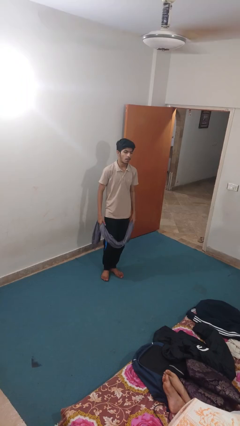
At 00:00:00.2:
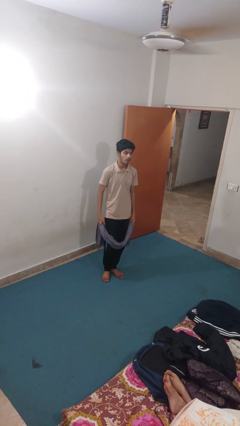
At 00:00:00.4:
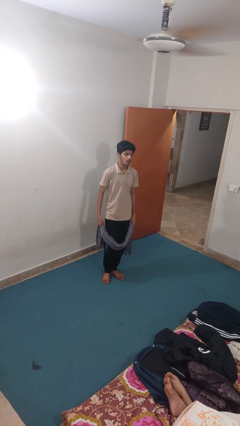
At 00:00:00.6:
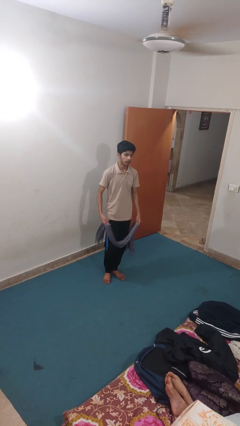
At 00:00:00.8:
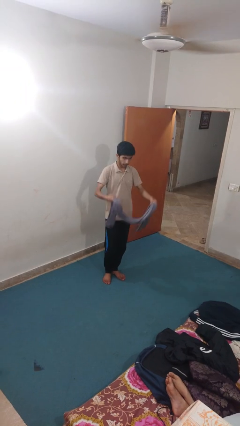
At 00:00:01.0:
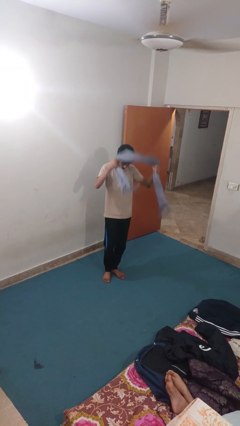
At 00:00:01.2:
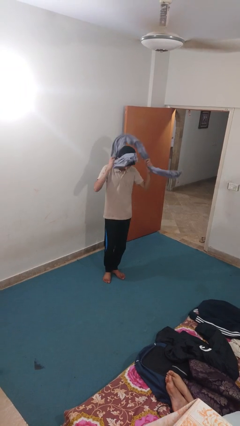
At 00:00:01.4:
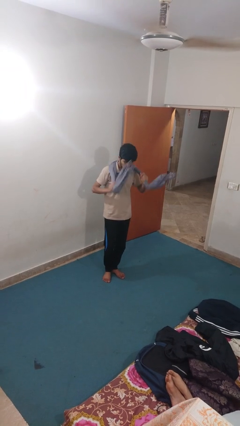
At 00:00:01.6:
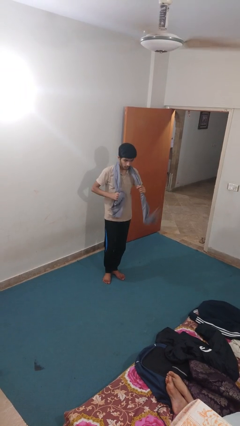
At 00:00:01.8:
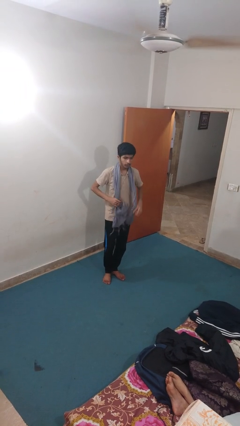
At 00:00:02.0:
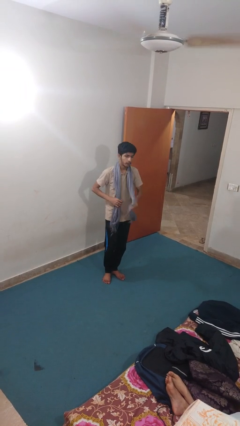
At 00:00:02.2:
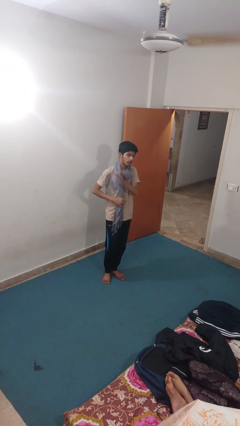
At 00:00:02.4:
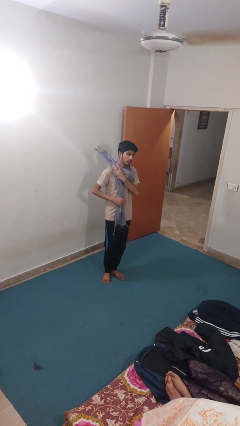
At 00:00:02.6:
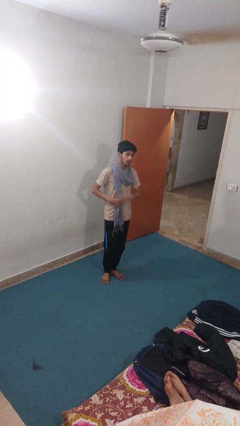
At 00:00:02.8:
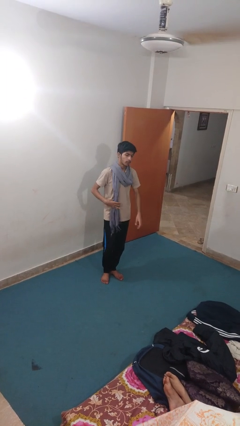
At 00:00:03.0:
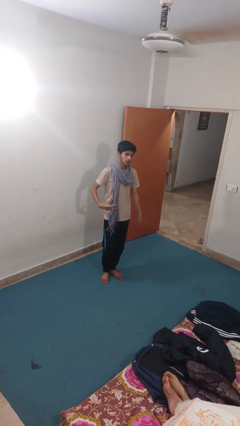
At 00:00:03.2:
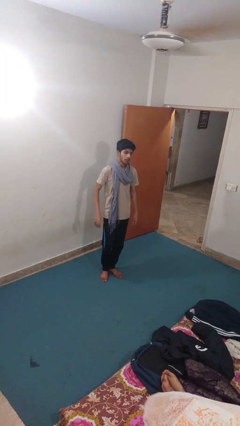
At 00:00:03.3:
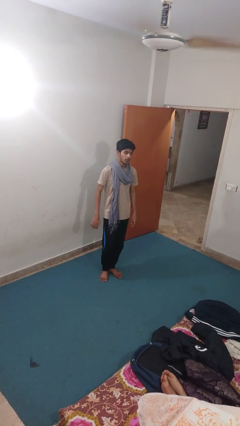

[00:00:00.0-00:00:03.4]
person puts on scarf

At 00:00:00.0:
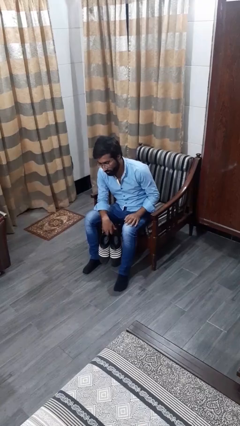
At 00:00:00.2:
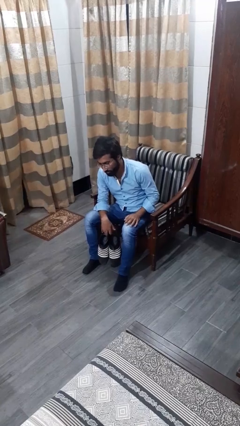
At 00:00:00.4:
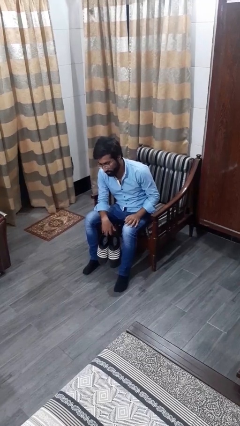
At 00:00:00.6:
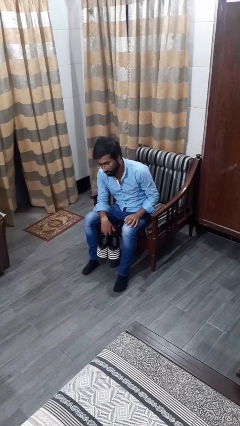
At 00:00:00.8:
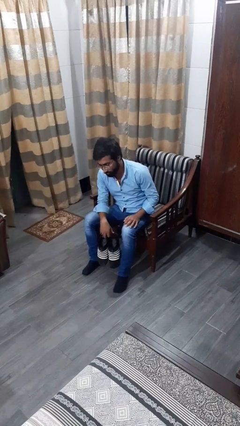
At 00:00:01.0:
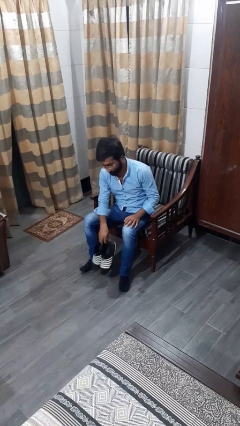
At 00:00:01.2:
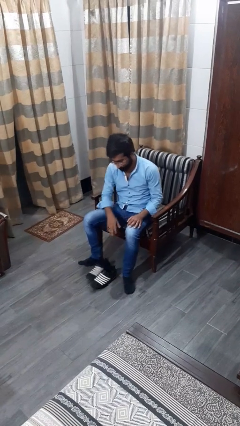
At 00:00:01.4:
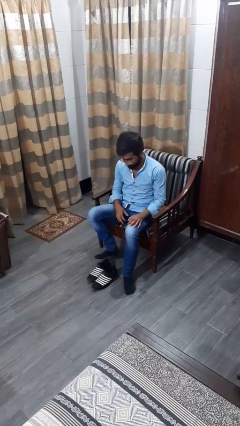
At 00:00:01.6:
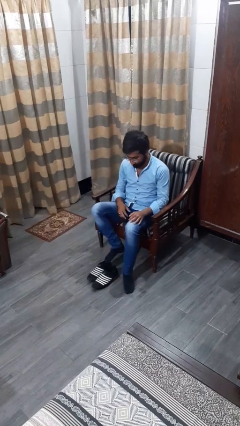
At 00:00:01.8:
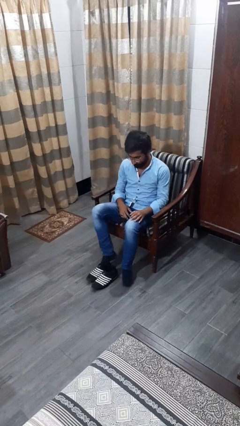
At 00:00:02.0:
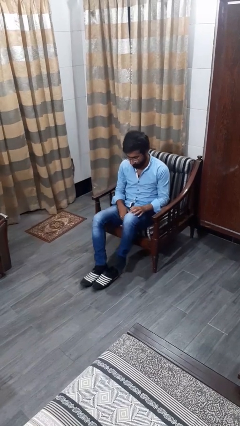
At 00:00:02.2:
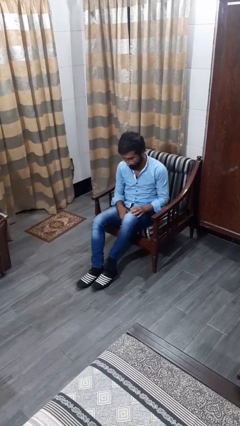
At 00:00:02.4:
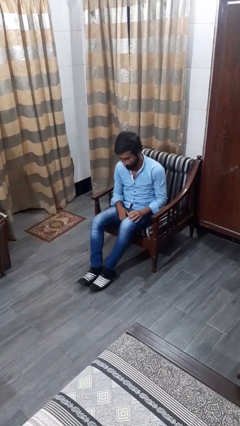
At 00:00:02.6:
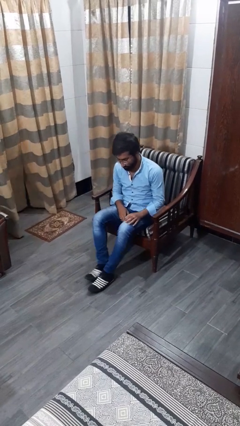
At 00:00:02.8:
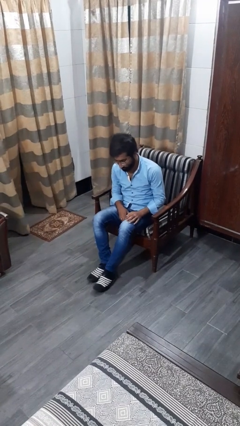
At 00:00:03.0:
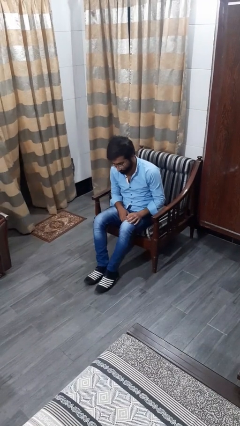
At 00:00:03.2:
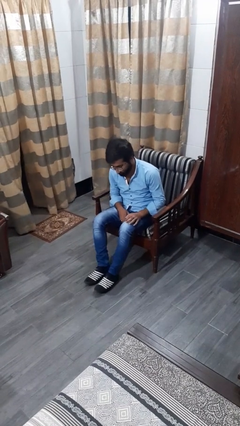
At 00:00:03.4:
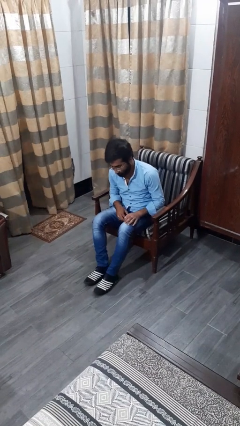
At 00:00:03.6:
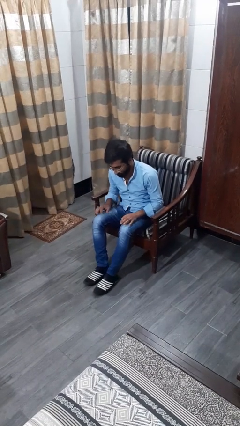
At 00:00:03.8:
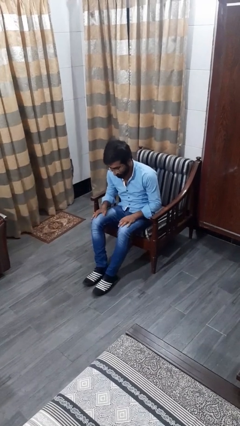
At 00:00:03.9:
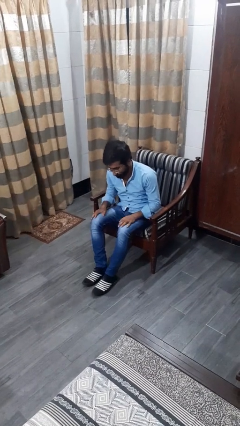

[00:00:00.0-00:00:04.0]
person puts on shoes

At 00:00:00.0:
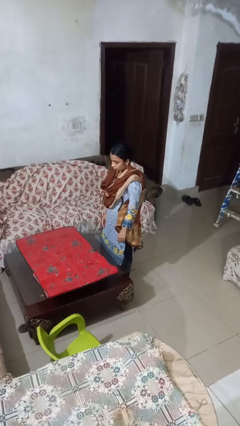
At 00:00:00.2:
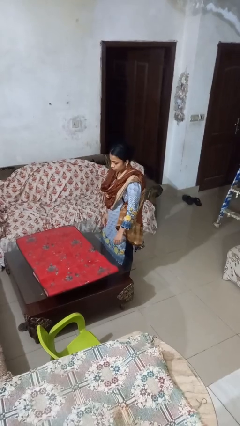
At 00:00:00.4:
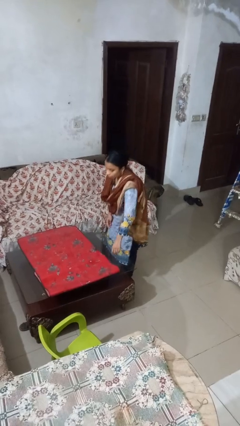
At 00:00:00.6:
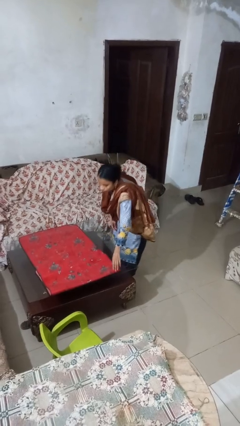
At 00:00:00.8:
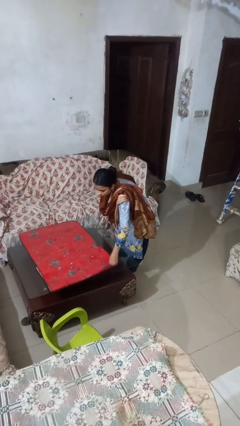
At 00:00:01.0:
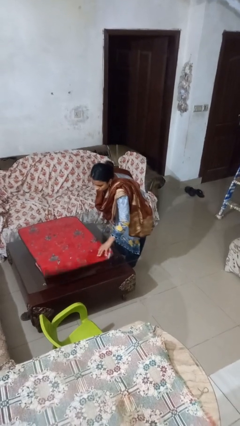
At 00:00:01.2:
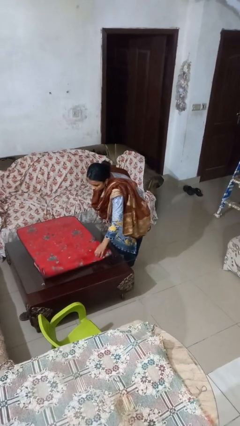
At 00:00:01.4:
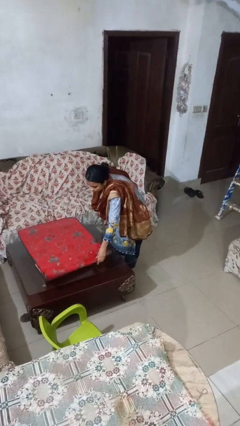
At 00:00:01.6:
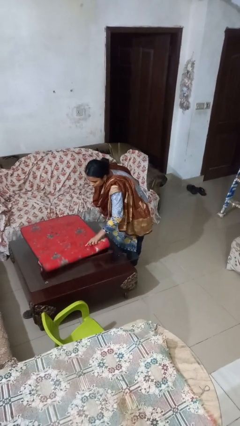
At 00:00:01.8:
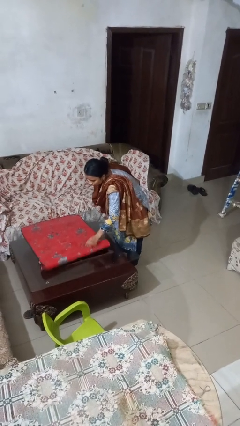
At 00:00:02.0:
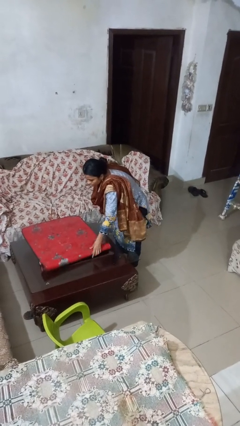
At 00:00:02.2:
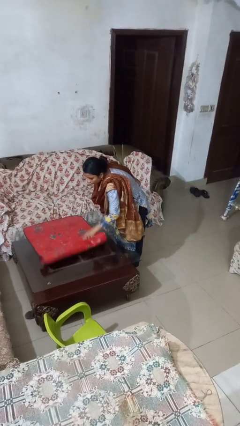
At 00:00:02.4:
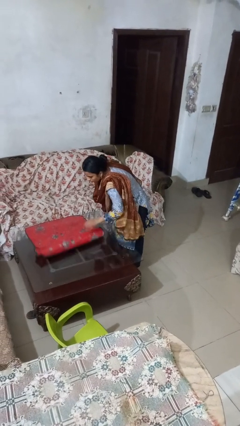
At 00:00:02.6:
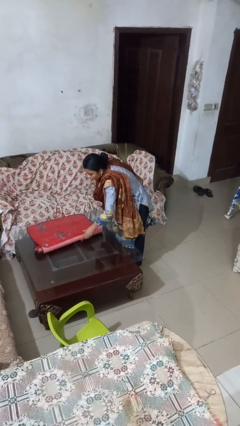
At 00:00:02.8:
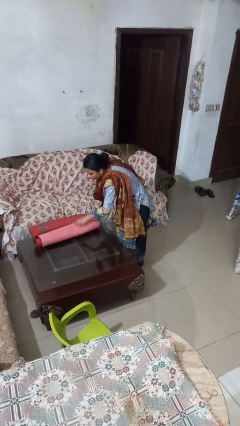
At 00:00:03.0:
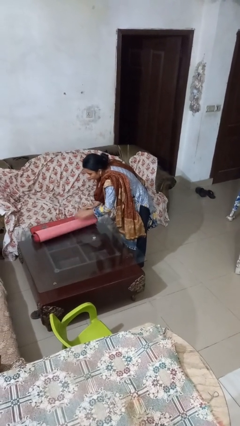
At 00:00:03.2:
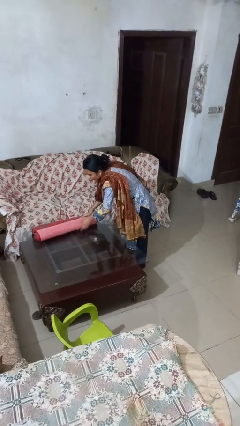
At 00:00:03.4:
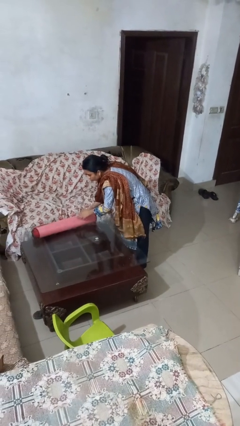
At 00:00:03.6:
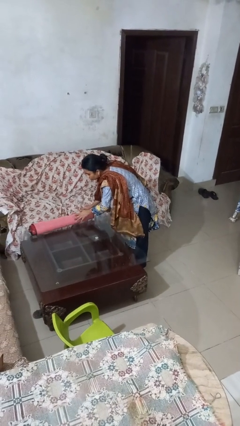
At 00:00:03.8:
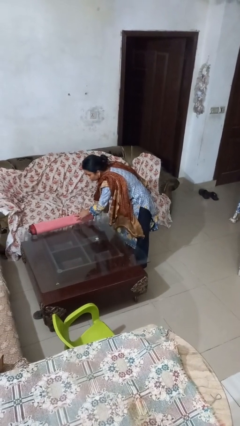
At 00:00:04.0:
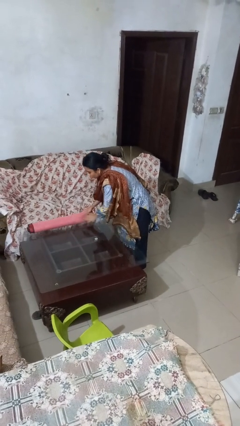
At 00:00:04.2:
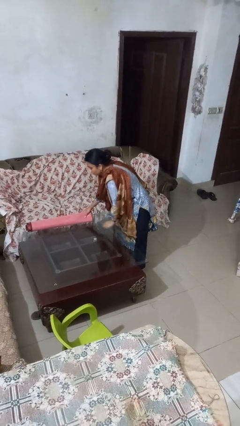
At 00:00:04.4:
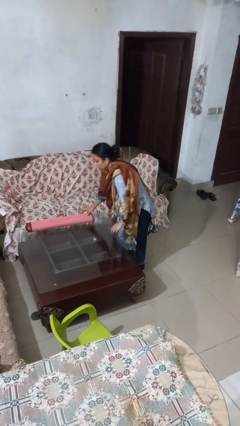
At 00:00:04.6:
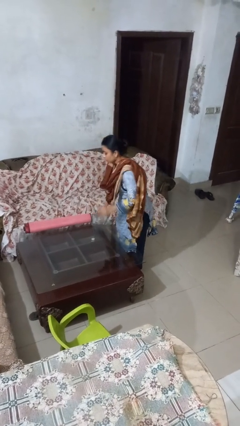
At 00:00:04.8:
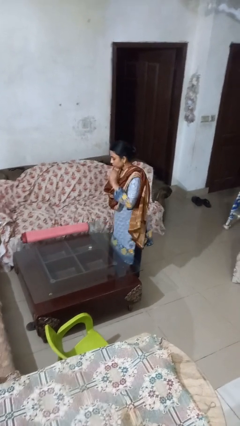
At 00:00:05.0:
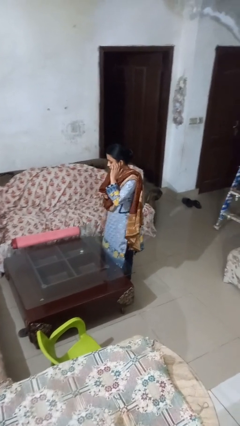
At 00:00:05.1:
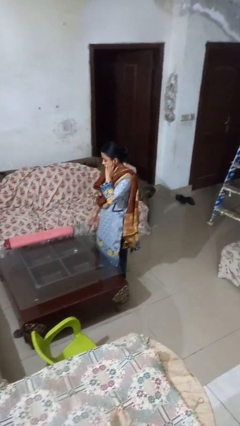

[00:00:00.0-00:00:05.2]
person folds tablecloth

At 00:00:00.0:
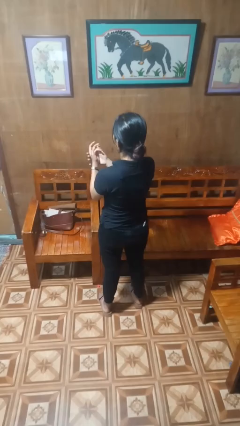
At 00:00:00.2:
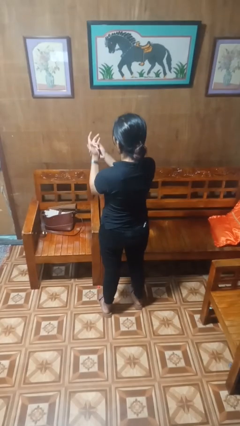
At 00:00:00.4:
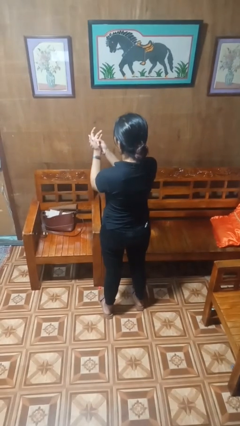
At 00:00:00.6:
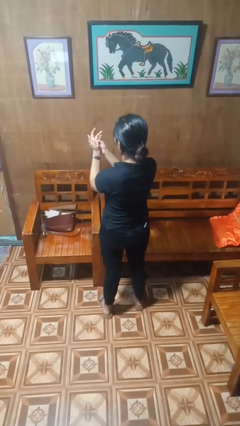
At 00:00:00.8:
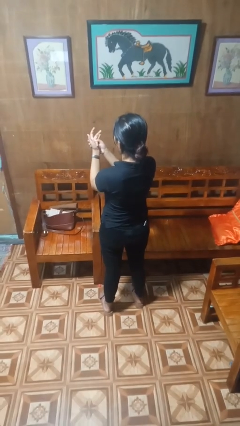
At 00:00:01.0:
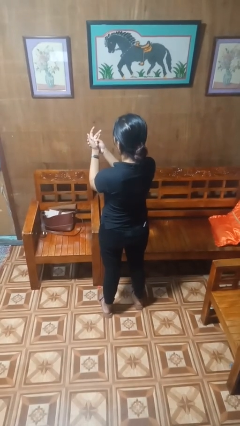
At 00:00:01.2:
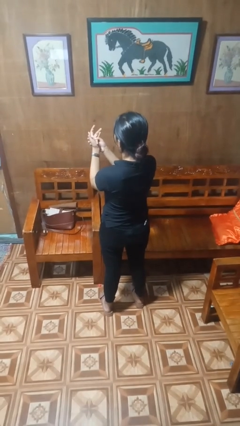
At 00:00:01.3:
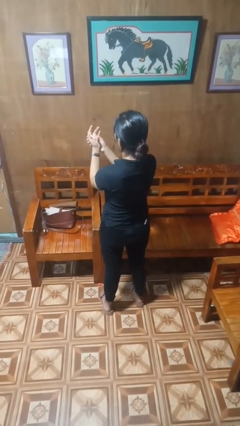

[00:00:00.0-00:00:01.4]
person cracks knuckles

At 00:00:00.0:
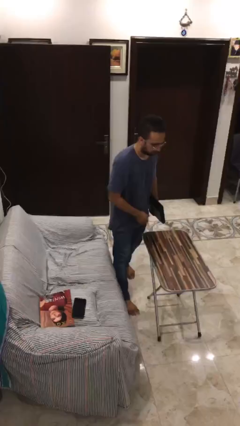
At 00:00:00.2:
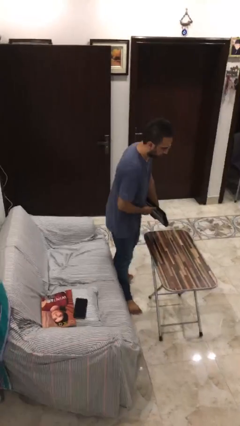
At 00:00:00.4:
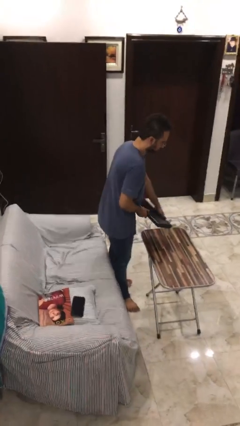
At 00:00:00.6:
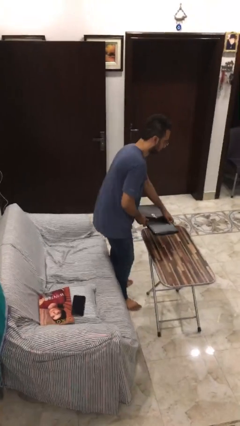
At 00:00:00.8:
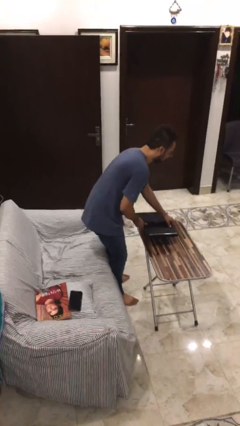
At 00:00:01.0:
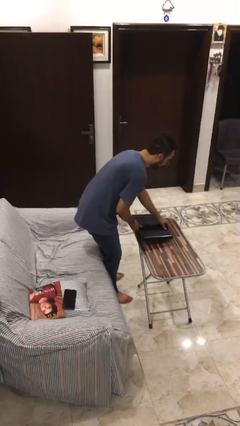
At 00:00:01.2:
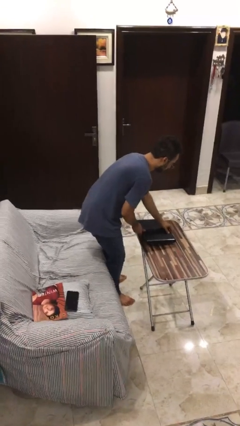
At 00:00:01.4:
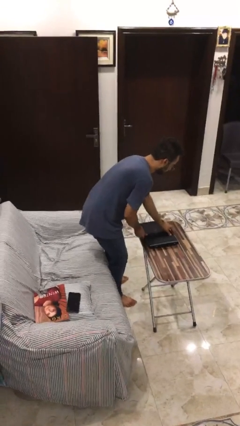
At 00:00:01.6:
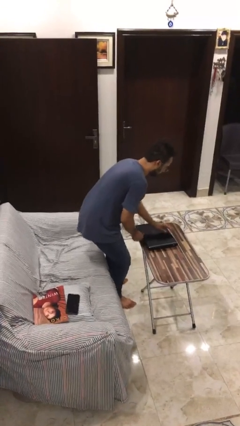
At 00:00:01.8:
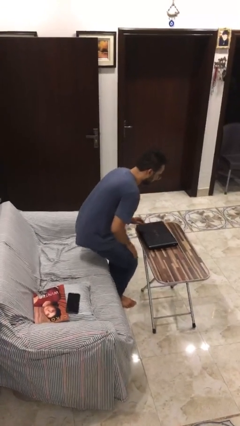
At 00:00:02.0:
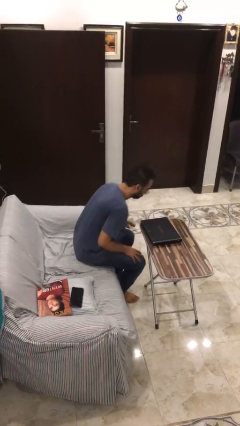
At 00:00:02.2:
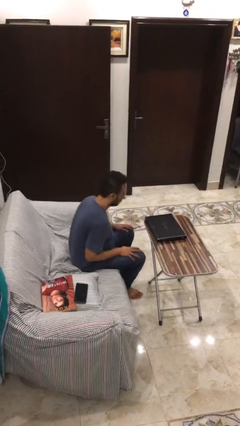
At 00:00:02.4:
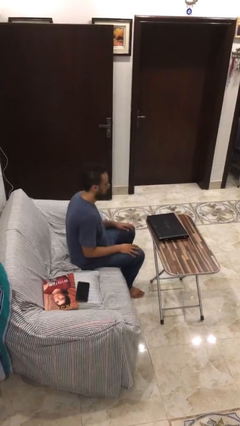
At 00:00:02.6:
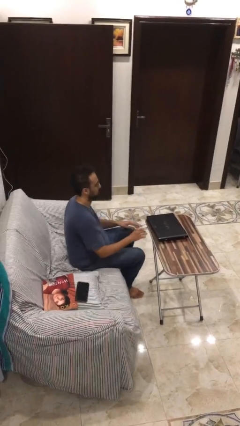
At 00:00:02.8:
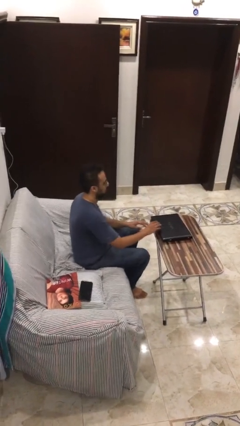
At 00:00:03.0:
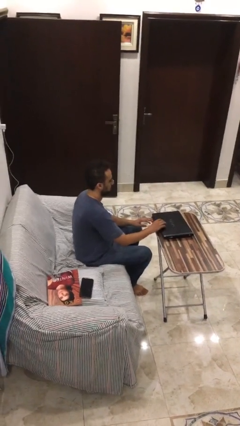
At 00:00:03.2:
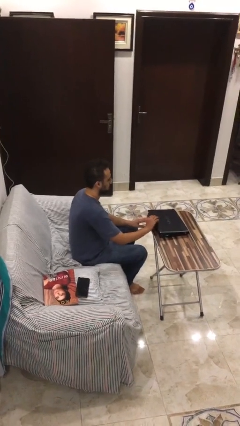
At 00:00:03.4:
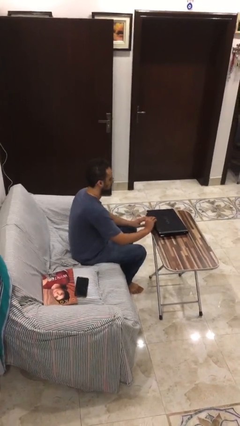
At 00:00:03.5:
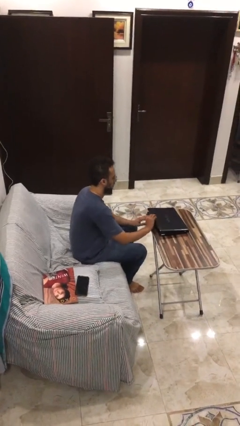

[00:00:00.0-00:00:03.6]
person sits down
